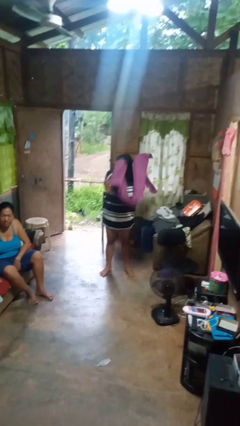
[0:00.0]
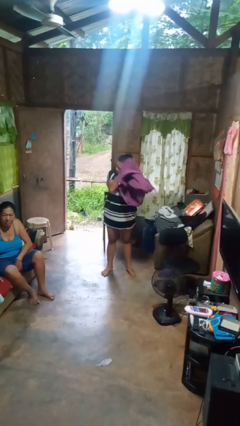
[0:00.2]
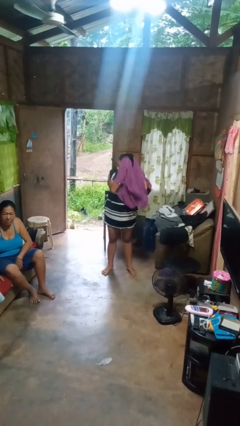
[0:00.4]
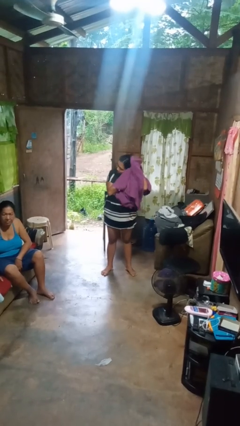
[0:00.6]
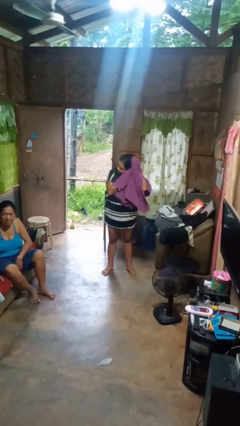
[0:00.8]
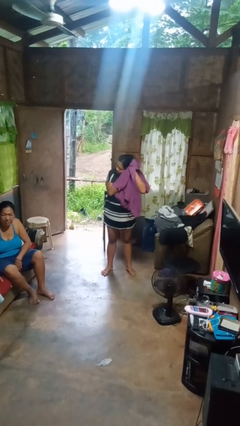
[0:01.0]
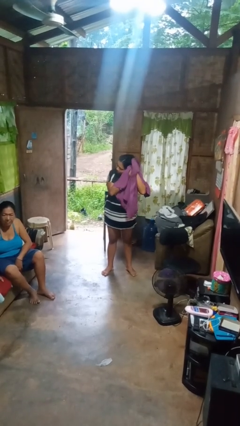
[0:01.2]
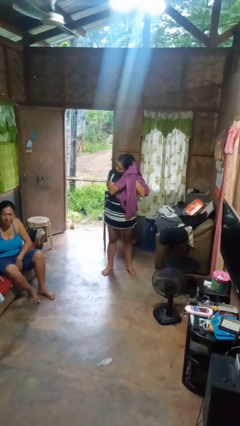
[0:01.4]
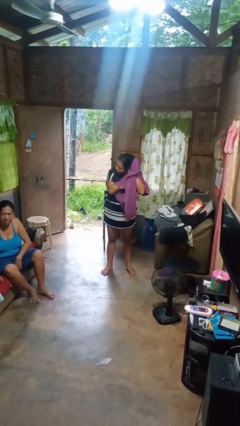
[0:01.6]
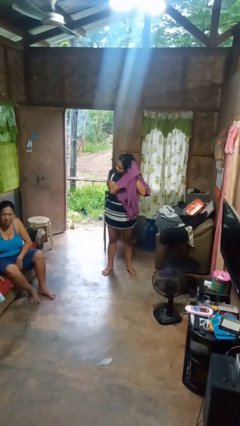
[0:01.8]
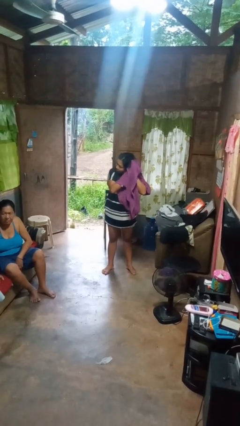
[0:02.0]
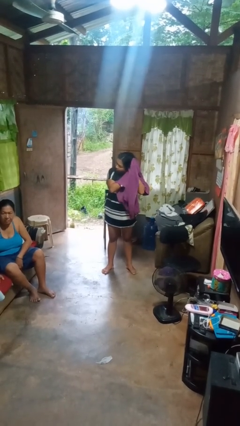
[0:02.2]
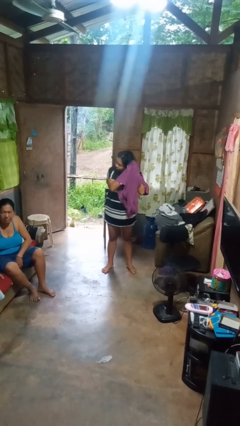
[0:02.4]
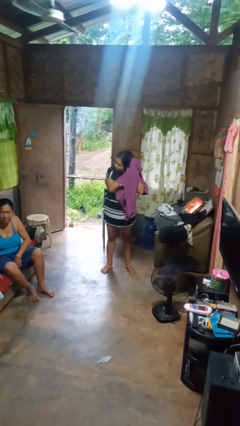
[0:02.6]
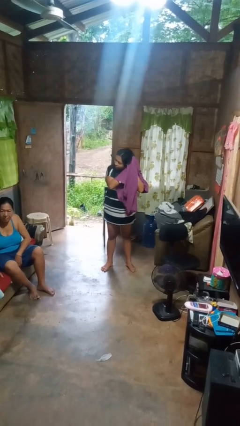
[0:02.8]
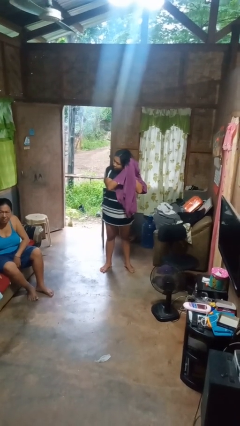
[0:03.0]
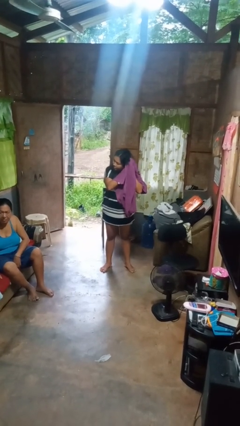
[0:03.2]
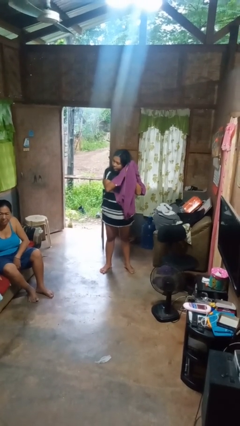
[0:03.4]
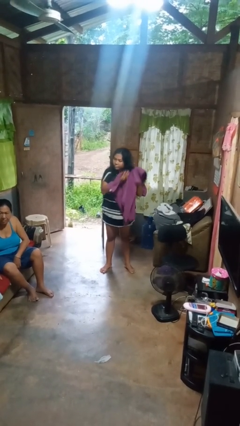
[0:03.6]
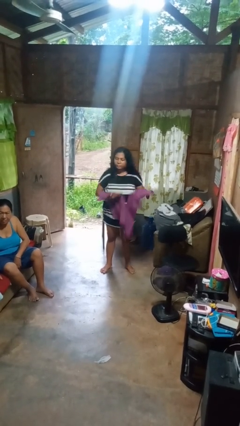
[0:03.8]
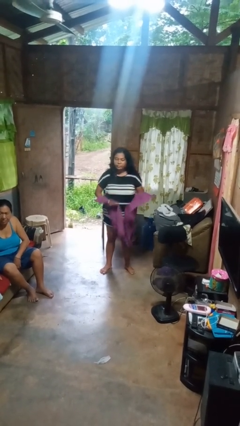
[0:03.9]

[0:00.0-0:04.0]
person dries hair with towel

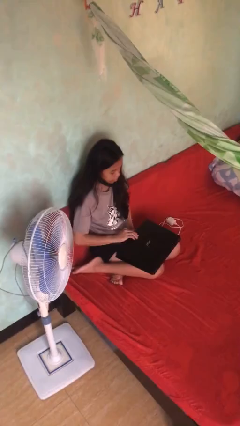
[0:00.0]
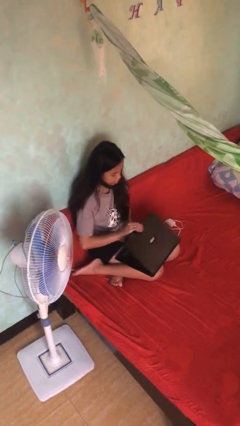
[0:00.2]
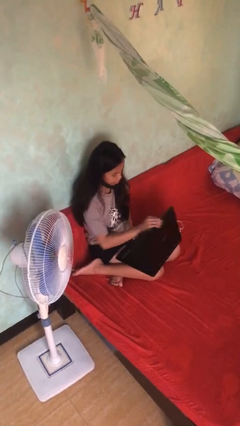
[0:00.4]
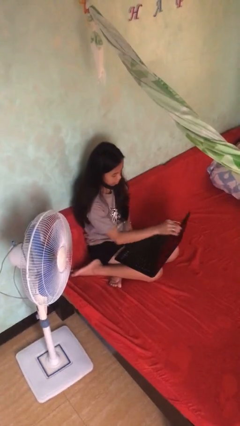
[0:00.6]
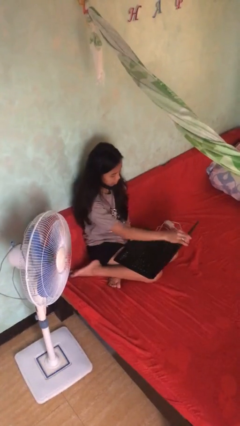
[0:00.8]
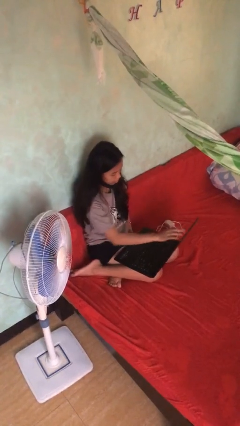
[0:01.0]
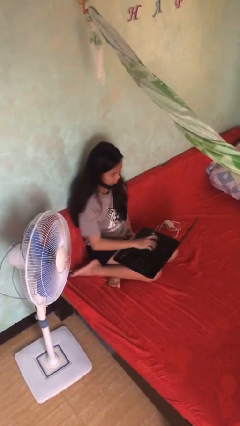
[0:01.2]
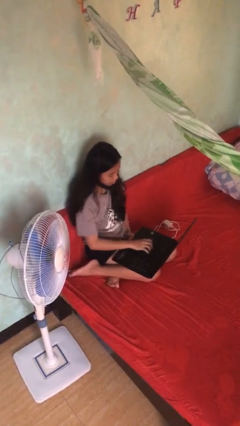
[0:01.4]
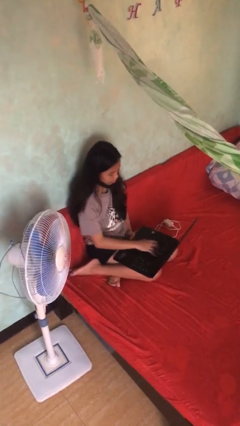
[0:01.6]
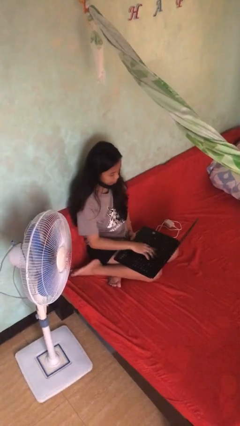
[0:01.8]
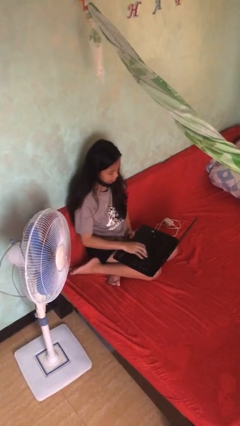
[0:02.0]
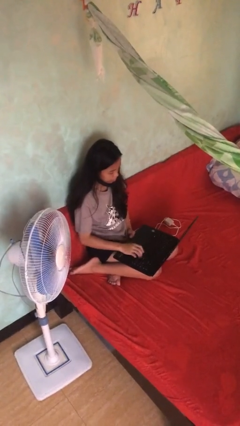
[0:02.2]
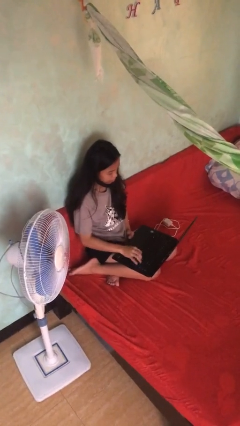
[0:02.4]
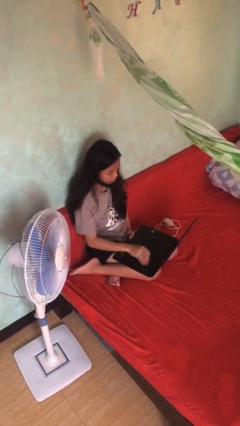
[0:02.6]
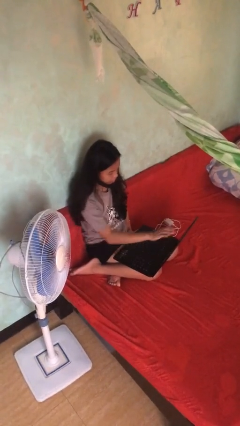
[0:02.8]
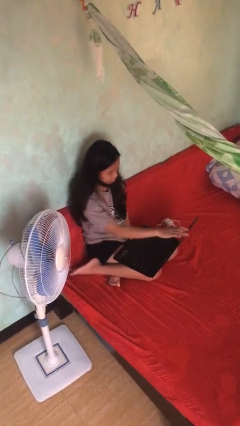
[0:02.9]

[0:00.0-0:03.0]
person interacts with laptop

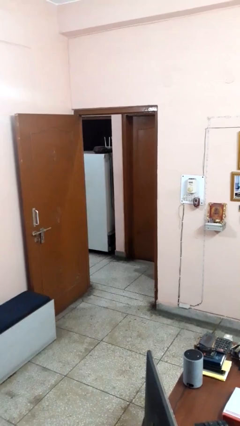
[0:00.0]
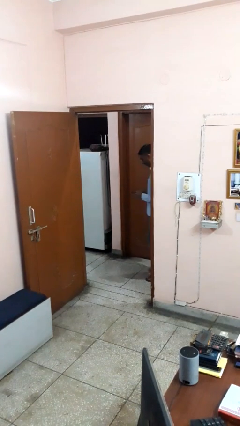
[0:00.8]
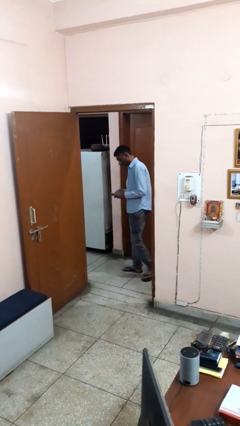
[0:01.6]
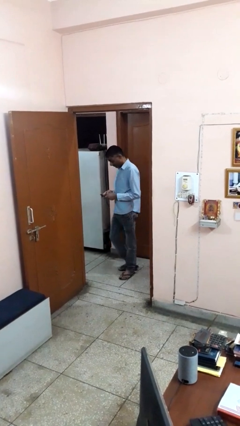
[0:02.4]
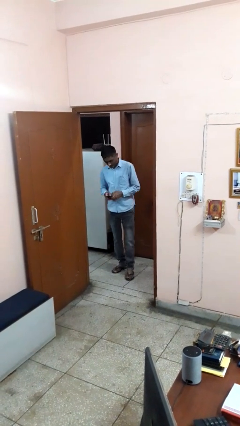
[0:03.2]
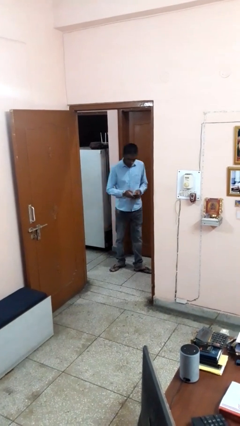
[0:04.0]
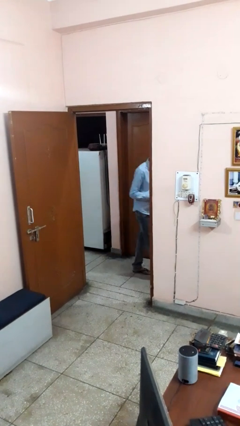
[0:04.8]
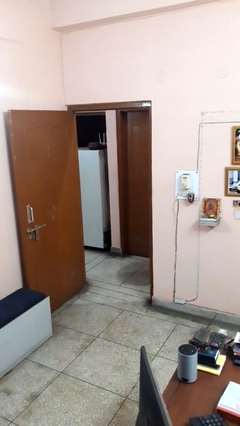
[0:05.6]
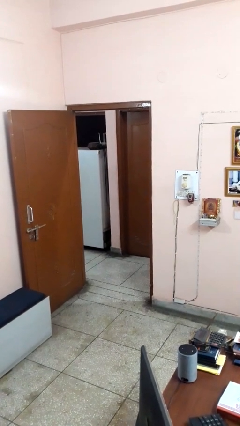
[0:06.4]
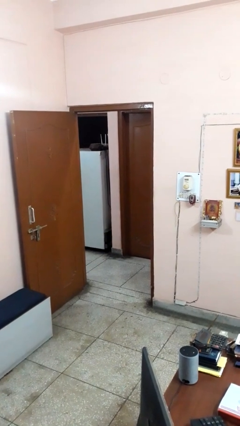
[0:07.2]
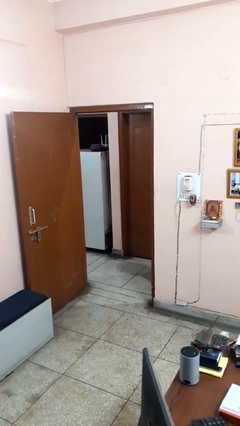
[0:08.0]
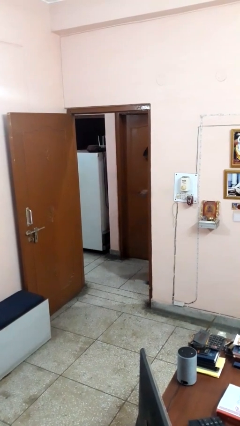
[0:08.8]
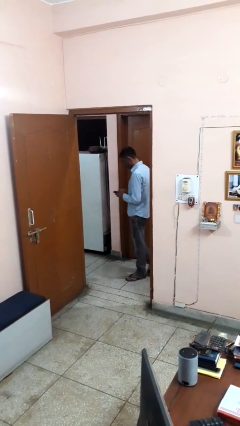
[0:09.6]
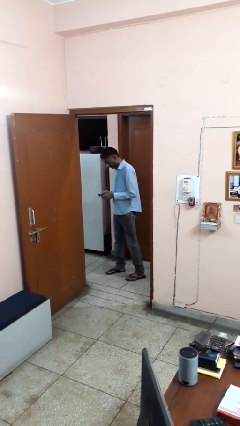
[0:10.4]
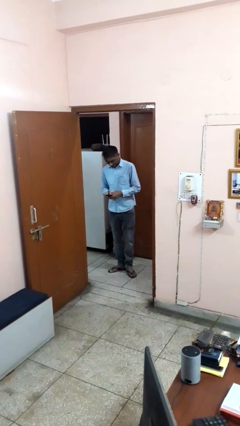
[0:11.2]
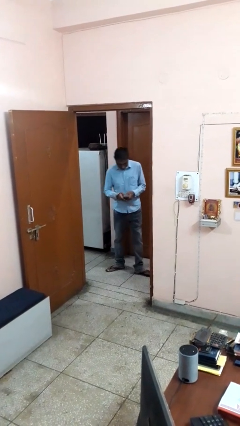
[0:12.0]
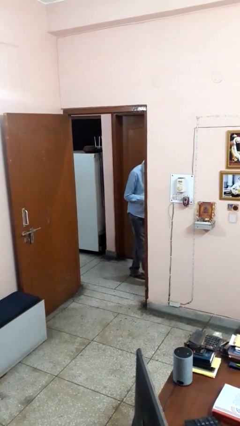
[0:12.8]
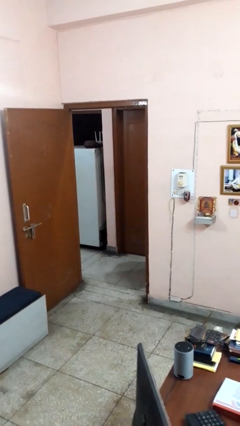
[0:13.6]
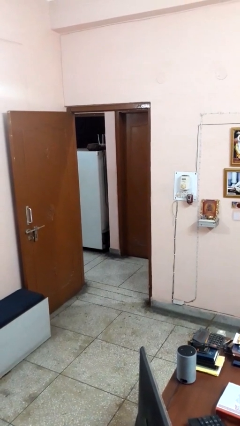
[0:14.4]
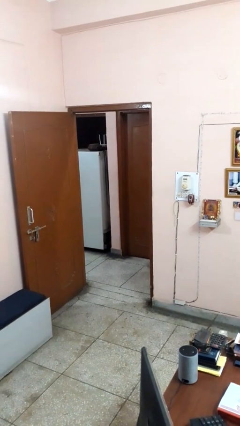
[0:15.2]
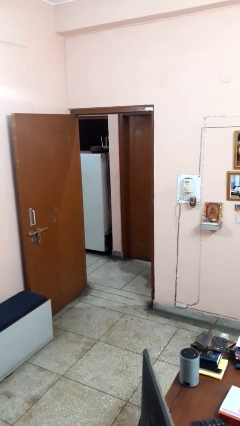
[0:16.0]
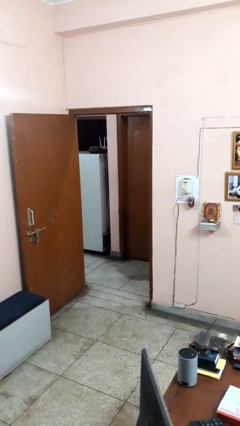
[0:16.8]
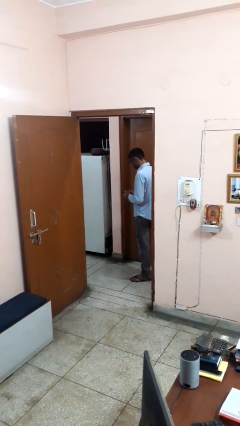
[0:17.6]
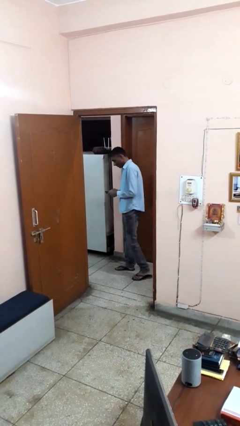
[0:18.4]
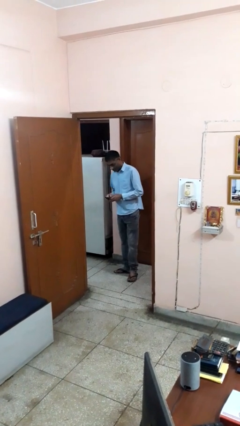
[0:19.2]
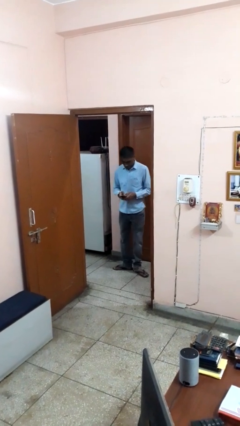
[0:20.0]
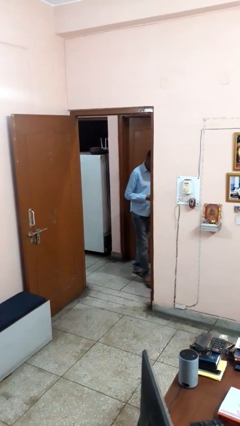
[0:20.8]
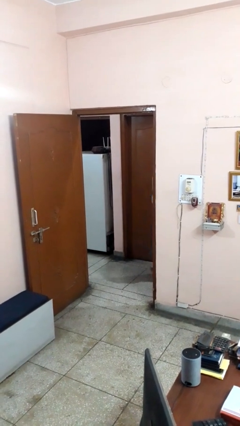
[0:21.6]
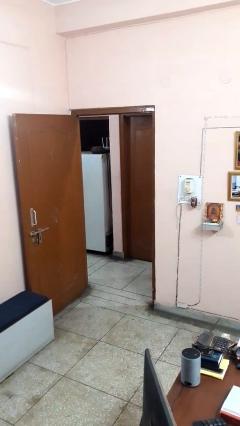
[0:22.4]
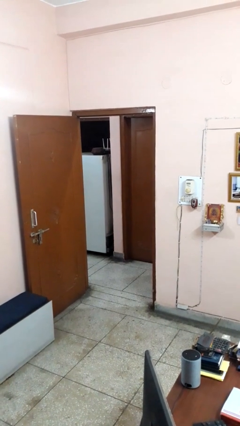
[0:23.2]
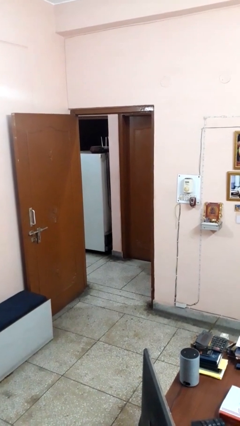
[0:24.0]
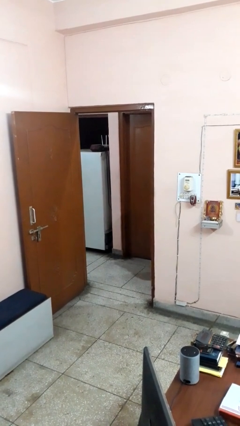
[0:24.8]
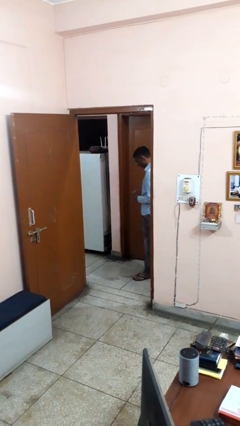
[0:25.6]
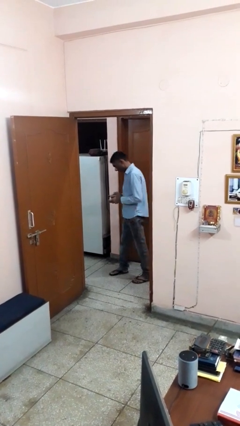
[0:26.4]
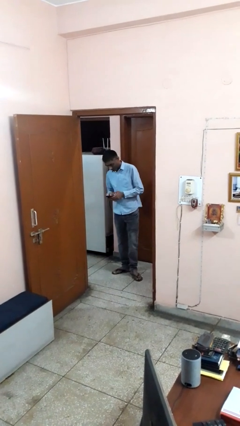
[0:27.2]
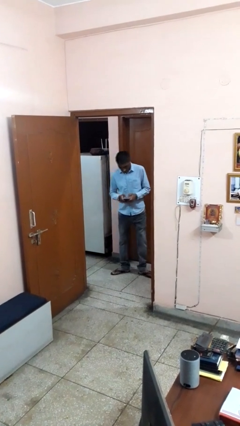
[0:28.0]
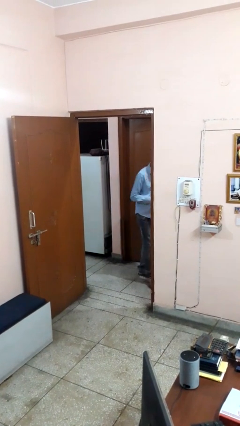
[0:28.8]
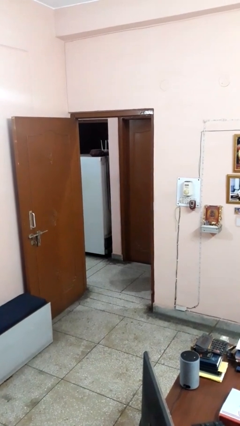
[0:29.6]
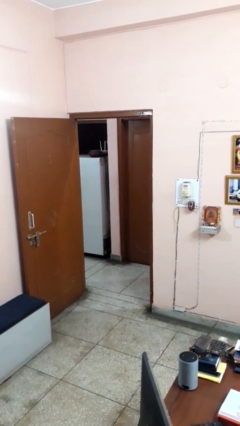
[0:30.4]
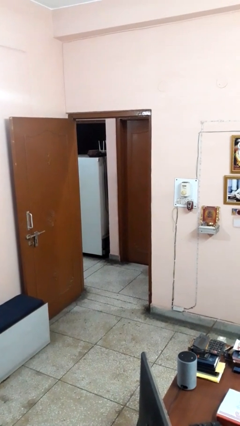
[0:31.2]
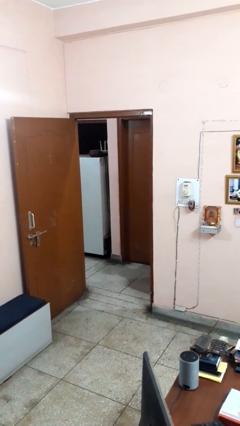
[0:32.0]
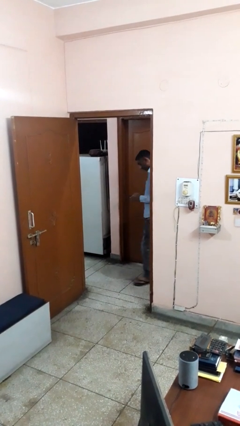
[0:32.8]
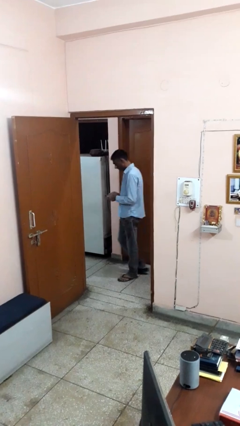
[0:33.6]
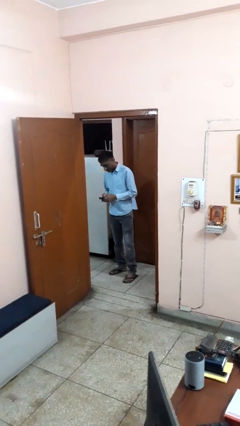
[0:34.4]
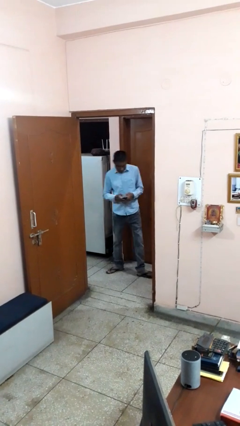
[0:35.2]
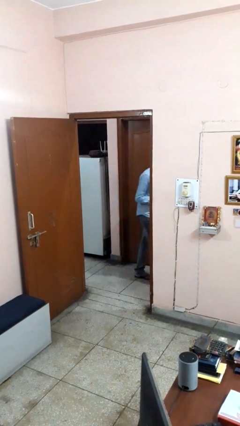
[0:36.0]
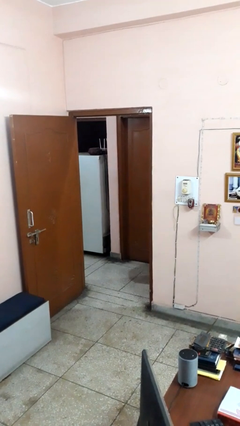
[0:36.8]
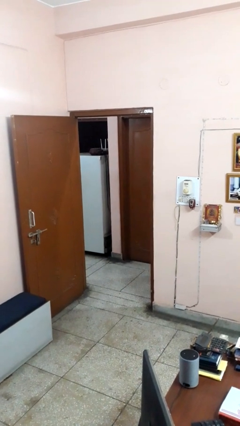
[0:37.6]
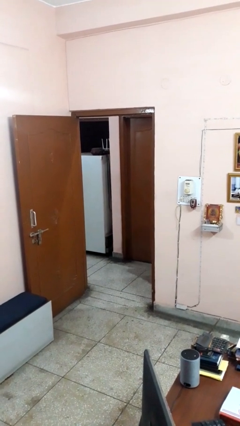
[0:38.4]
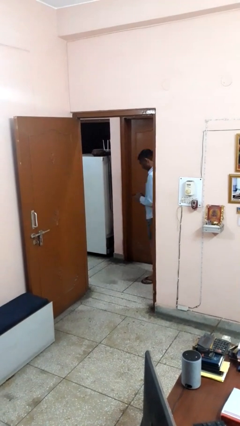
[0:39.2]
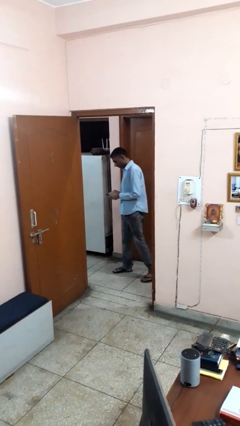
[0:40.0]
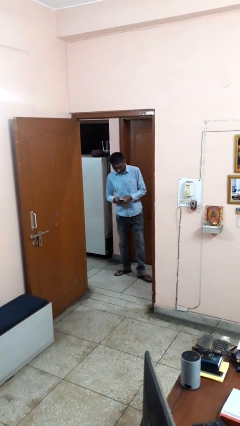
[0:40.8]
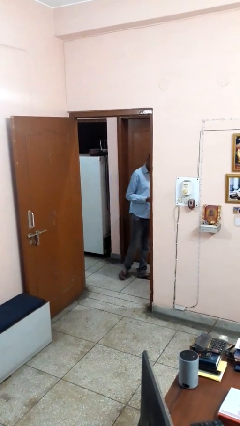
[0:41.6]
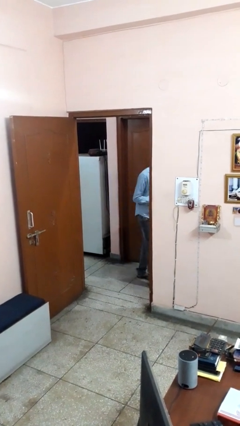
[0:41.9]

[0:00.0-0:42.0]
person texts on phone

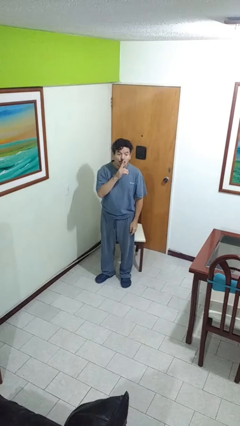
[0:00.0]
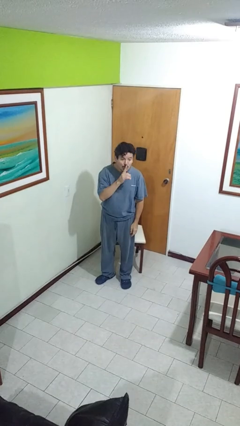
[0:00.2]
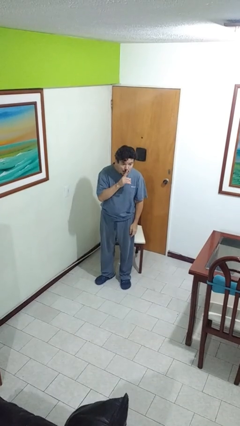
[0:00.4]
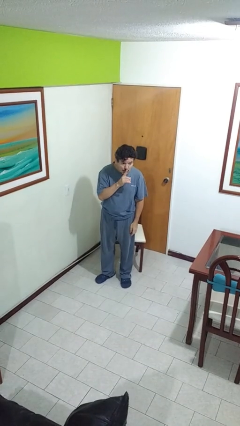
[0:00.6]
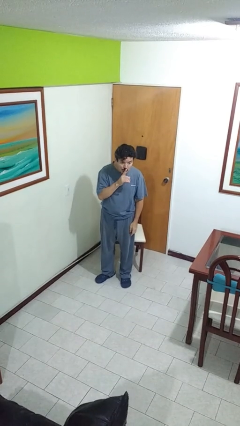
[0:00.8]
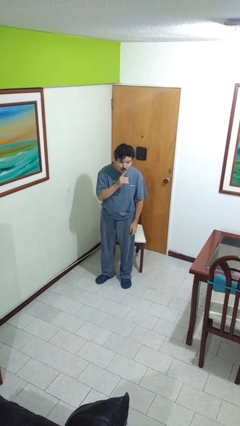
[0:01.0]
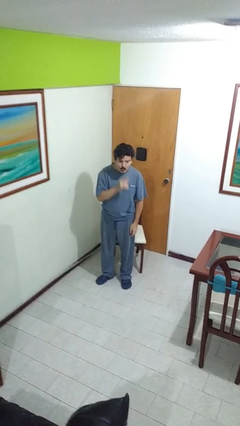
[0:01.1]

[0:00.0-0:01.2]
person gestures be quiet
